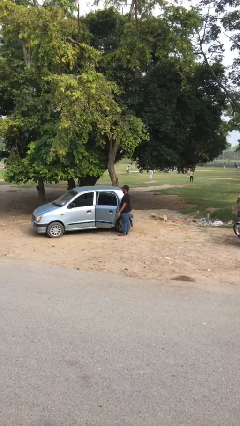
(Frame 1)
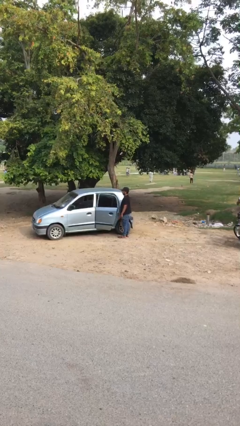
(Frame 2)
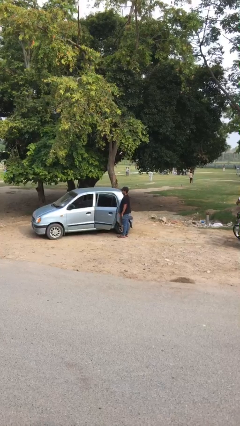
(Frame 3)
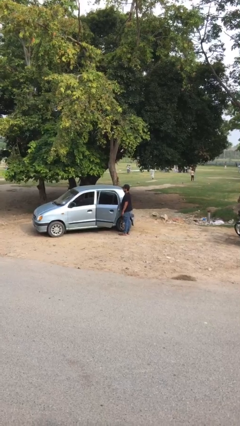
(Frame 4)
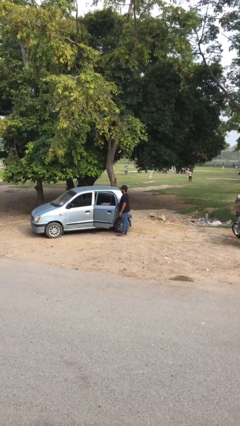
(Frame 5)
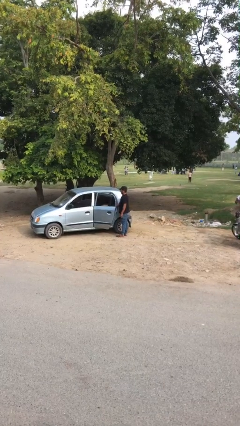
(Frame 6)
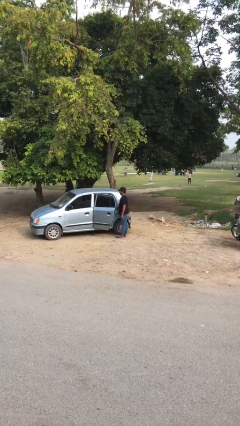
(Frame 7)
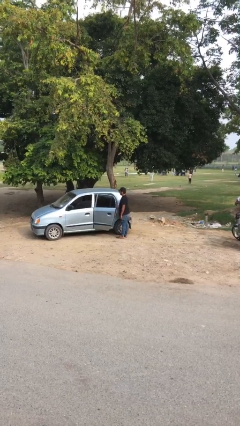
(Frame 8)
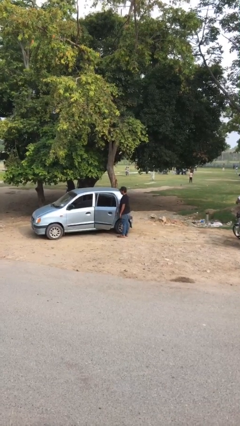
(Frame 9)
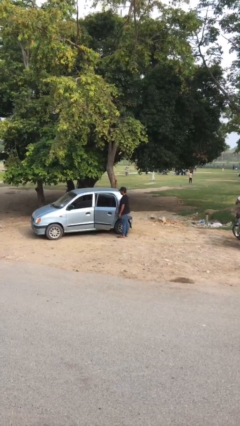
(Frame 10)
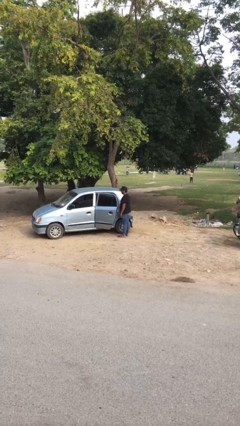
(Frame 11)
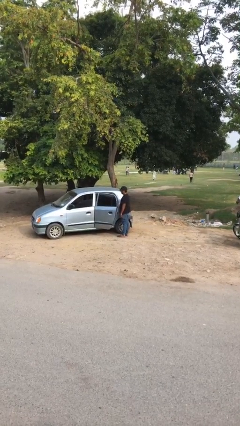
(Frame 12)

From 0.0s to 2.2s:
person loads car

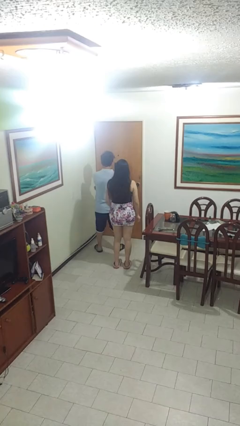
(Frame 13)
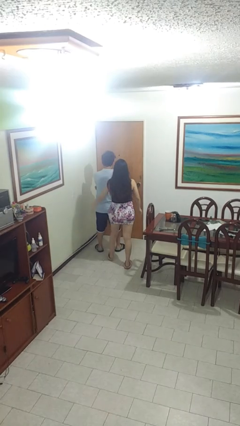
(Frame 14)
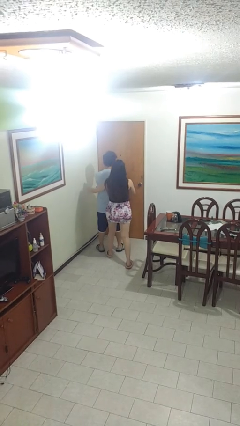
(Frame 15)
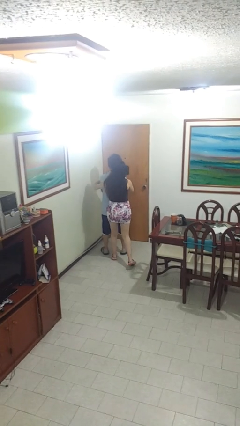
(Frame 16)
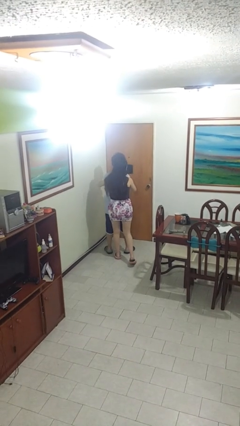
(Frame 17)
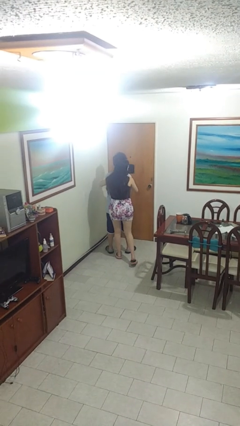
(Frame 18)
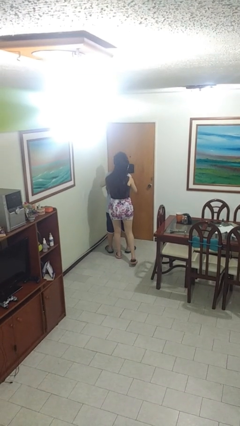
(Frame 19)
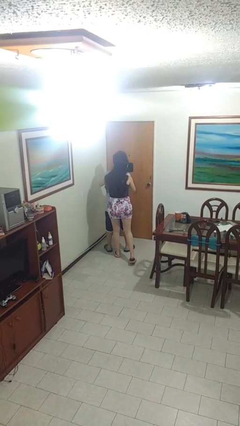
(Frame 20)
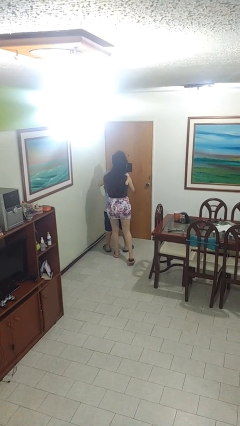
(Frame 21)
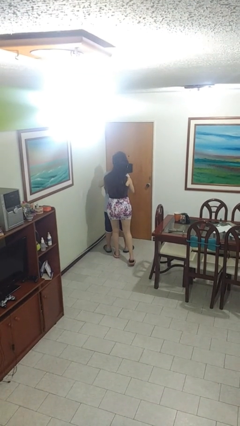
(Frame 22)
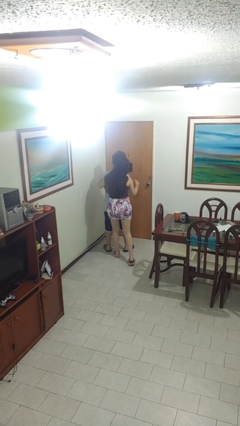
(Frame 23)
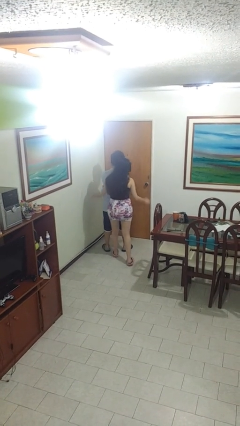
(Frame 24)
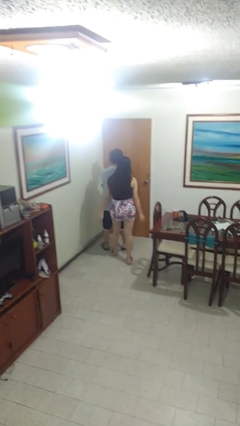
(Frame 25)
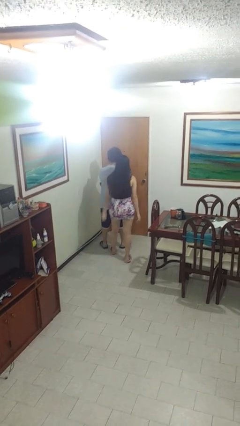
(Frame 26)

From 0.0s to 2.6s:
person hugs person from behind

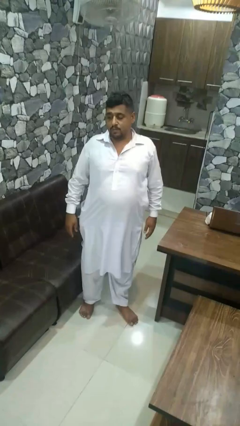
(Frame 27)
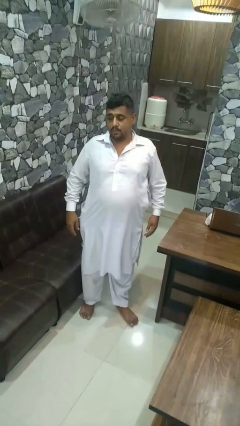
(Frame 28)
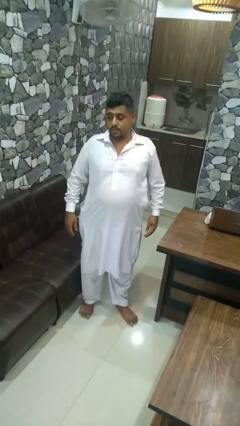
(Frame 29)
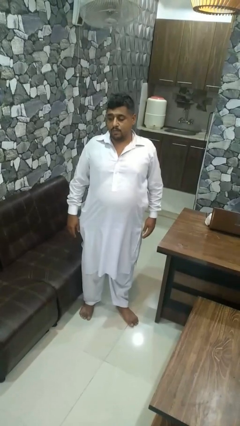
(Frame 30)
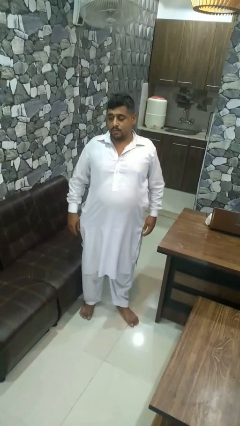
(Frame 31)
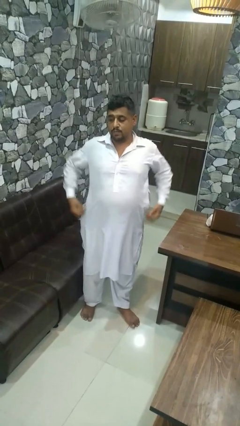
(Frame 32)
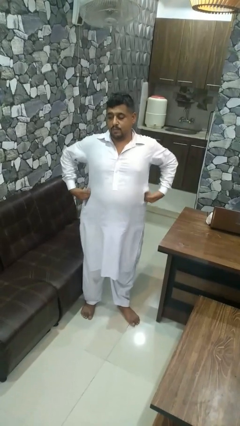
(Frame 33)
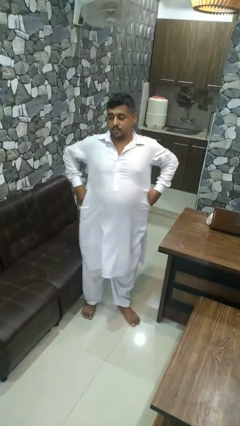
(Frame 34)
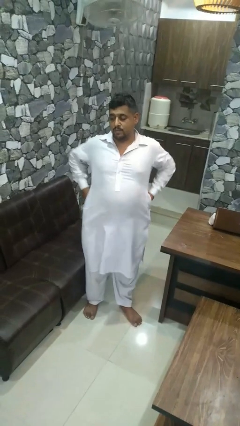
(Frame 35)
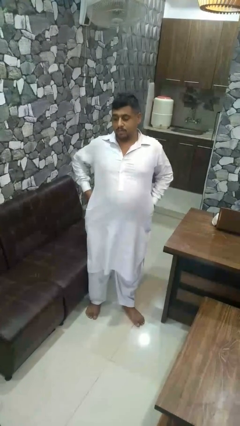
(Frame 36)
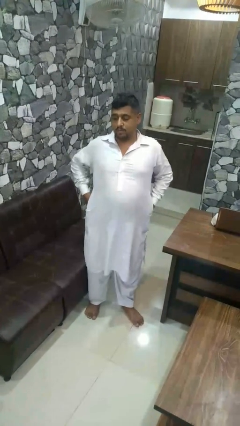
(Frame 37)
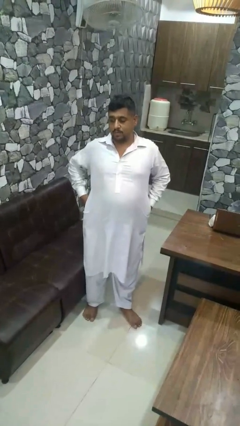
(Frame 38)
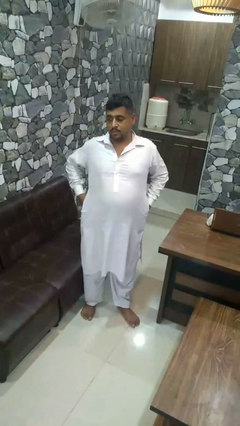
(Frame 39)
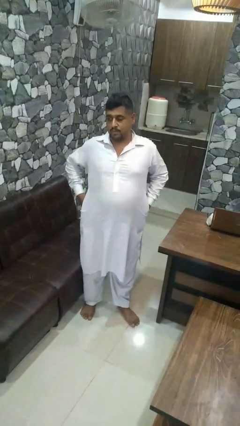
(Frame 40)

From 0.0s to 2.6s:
person puts hands in back pockets

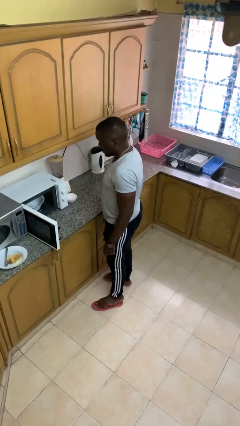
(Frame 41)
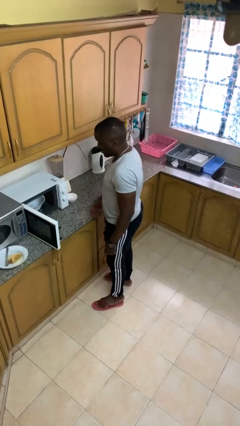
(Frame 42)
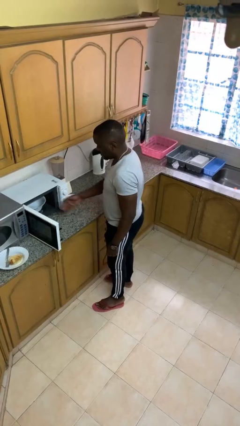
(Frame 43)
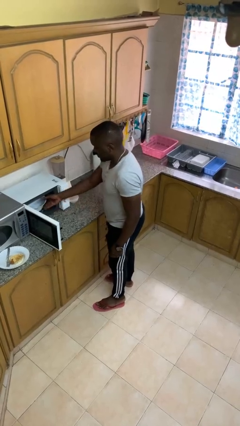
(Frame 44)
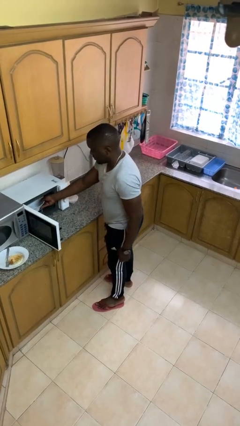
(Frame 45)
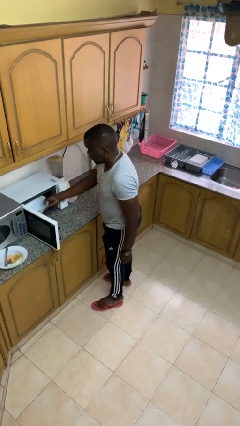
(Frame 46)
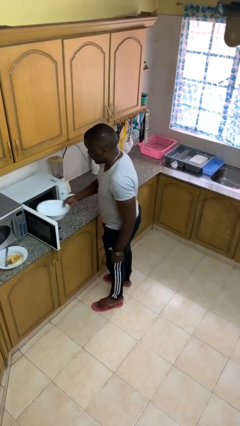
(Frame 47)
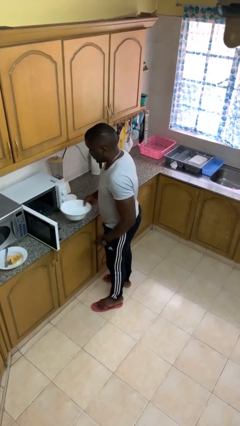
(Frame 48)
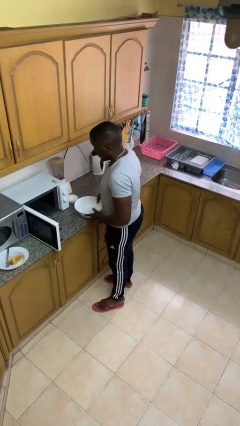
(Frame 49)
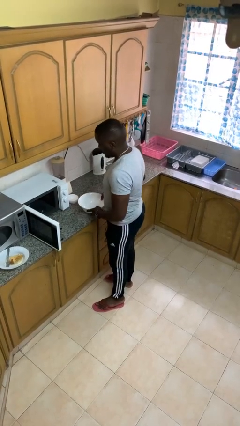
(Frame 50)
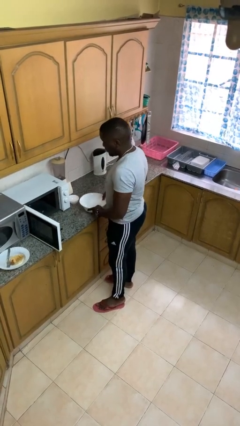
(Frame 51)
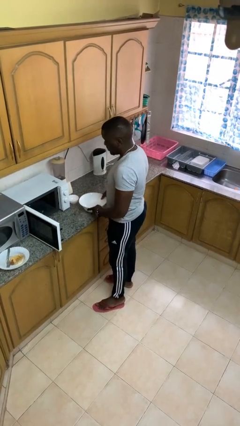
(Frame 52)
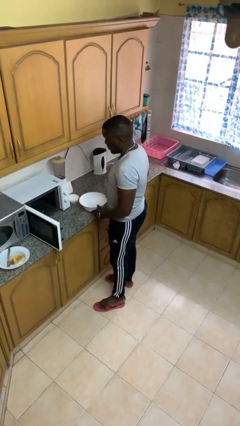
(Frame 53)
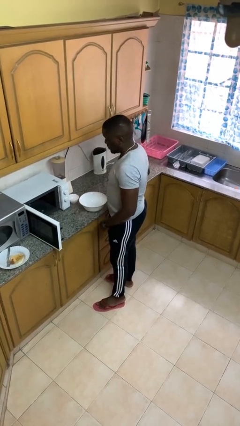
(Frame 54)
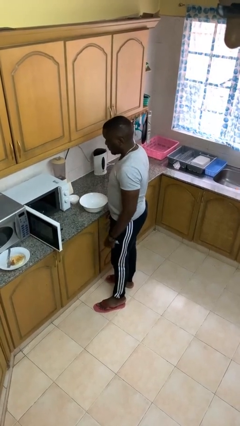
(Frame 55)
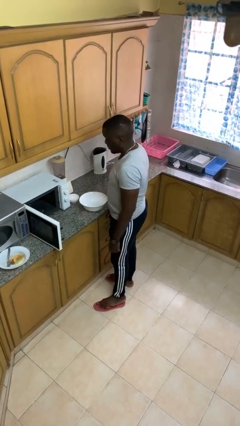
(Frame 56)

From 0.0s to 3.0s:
person takes object from microwave

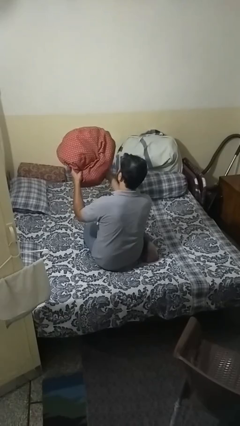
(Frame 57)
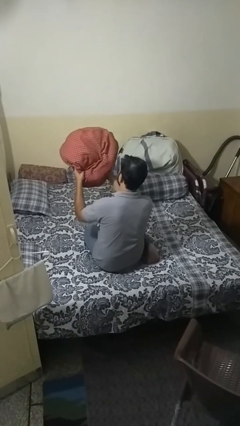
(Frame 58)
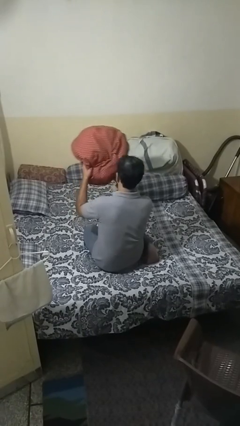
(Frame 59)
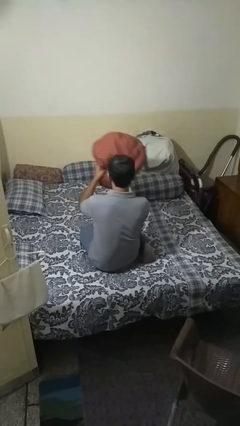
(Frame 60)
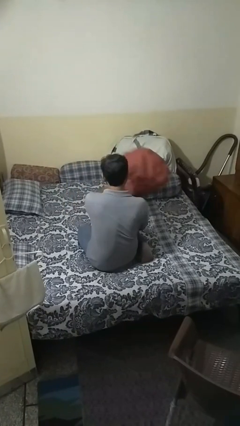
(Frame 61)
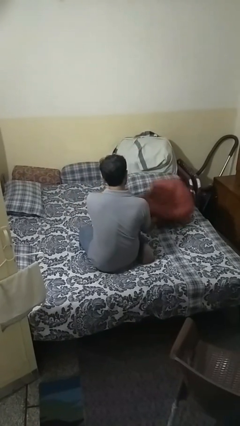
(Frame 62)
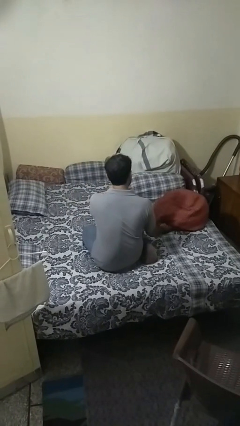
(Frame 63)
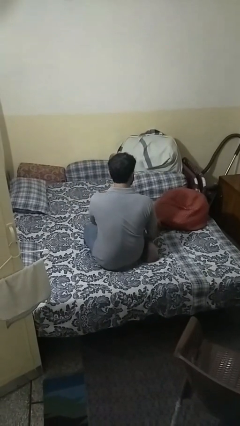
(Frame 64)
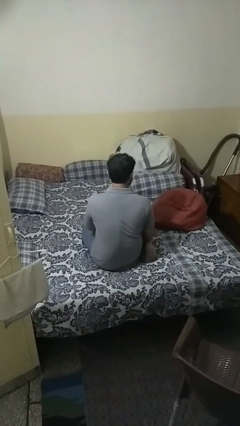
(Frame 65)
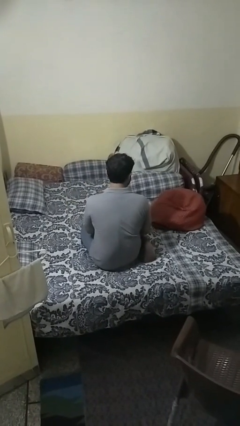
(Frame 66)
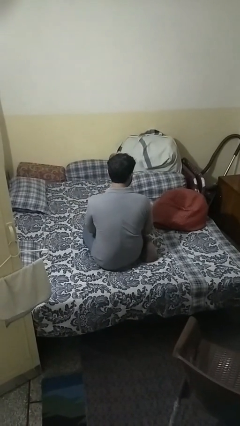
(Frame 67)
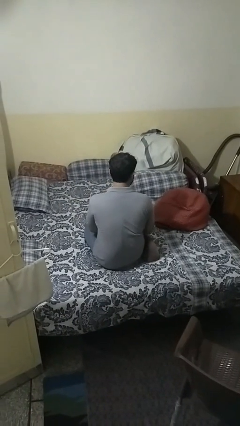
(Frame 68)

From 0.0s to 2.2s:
person puts down object on bed

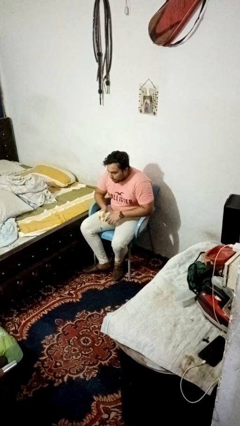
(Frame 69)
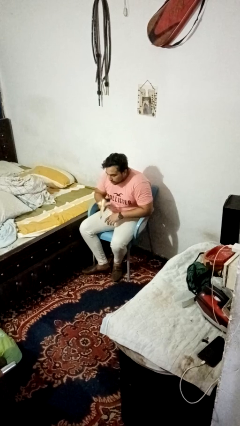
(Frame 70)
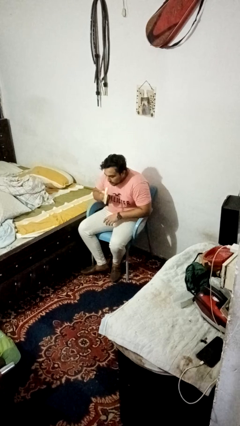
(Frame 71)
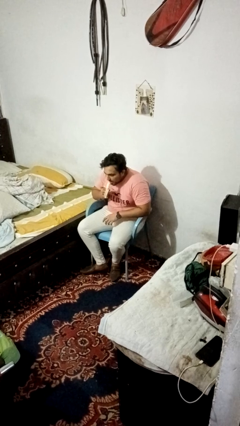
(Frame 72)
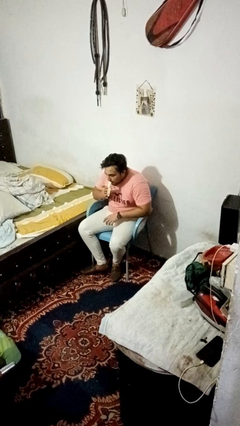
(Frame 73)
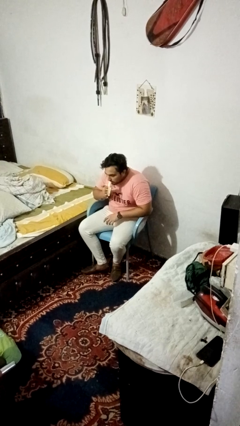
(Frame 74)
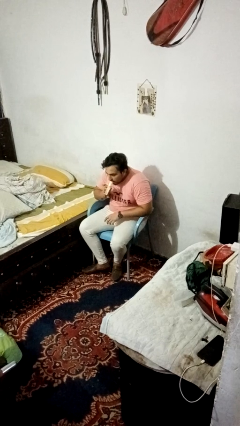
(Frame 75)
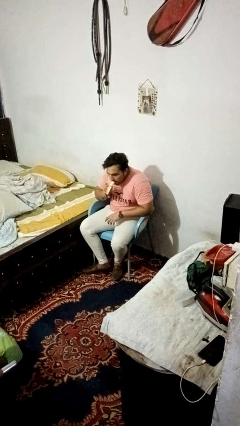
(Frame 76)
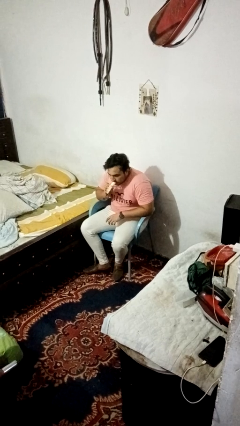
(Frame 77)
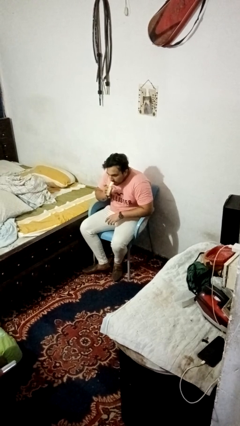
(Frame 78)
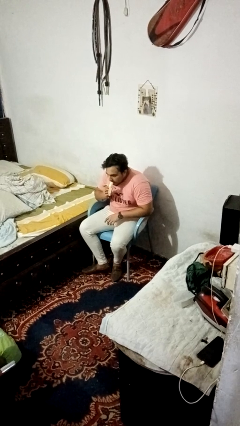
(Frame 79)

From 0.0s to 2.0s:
person eats banana

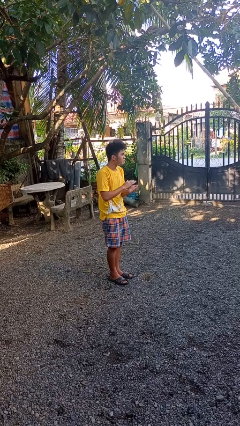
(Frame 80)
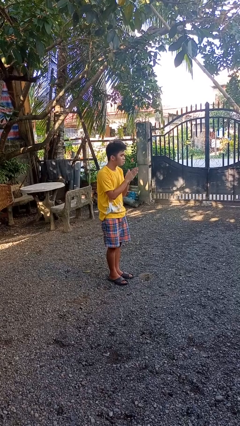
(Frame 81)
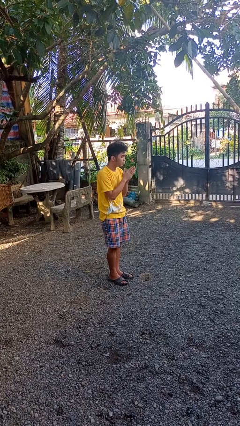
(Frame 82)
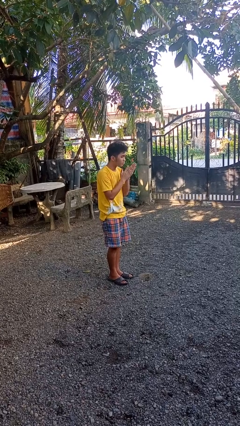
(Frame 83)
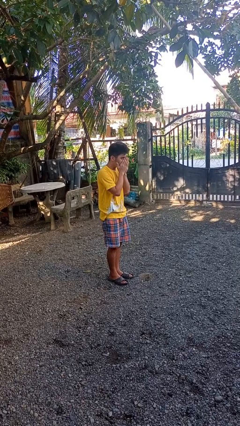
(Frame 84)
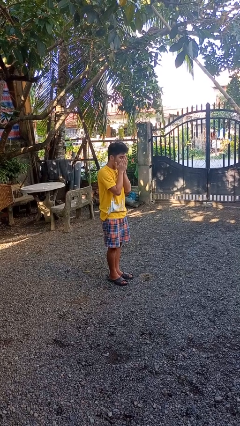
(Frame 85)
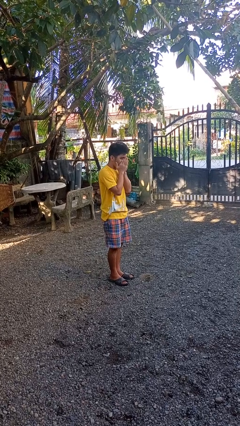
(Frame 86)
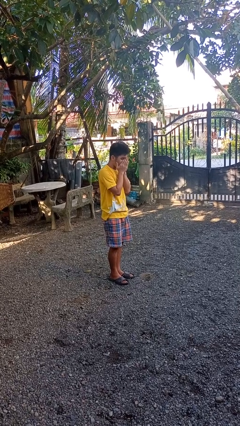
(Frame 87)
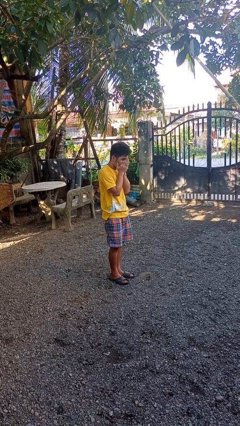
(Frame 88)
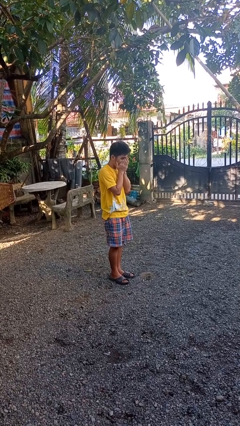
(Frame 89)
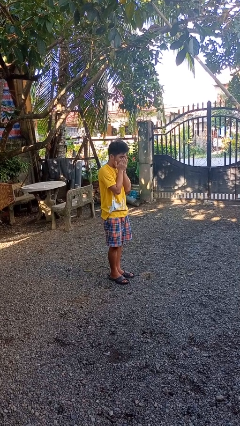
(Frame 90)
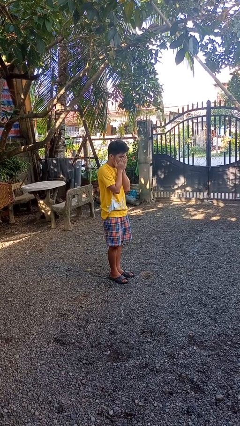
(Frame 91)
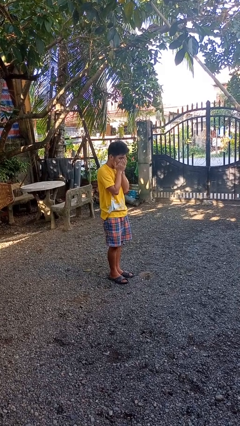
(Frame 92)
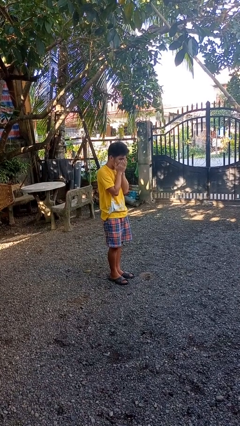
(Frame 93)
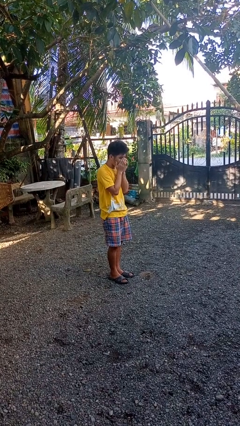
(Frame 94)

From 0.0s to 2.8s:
person blows into hands
